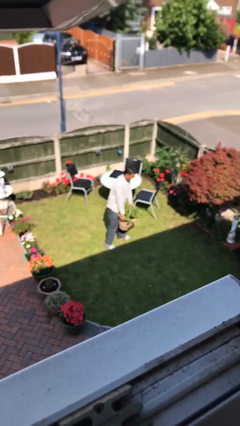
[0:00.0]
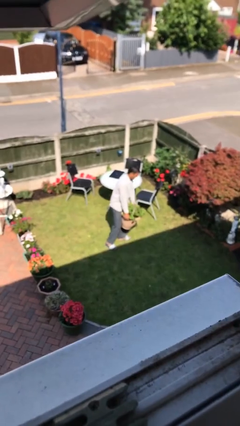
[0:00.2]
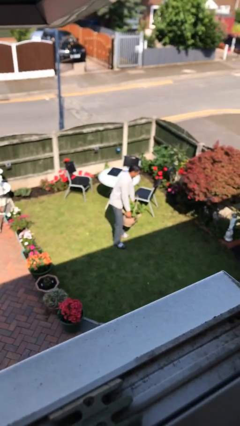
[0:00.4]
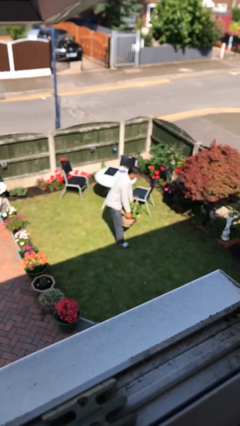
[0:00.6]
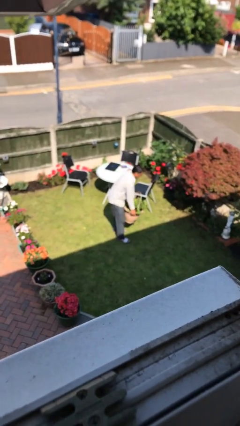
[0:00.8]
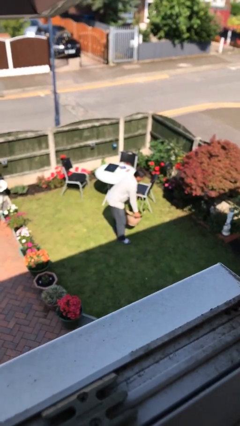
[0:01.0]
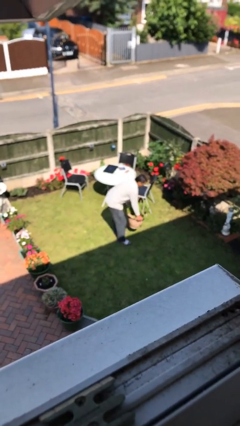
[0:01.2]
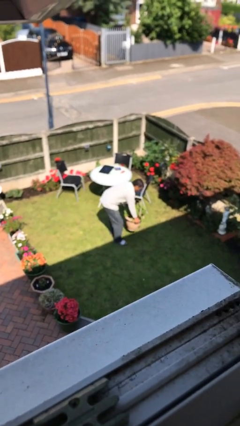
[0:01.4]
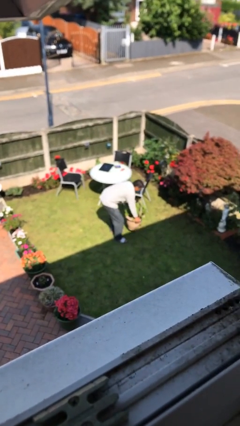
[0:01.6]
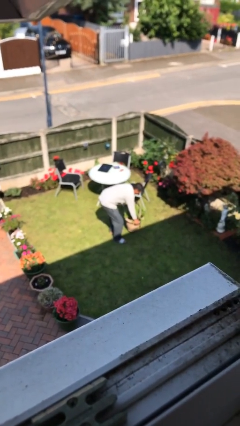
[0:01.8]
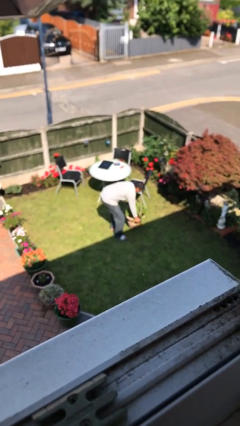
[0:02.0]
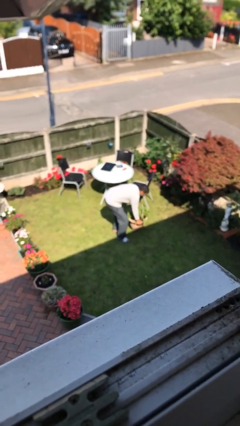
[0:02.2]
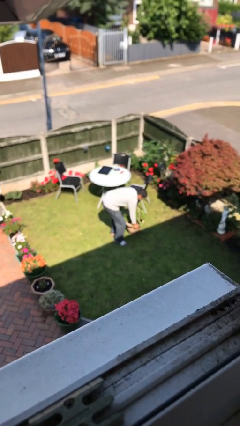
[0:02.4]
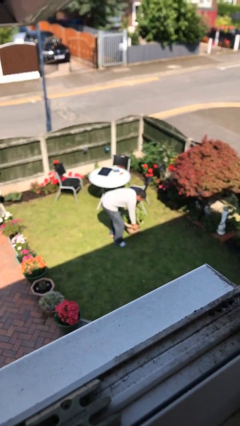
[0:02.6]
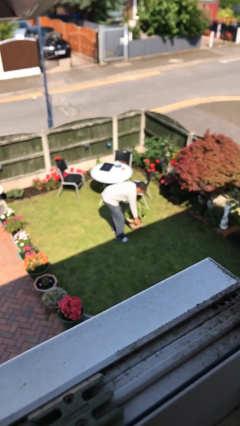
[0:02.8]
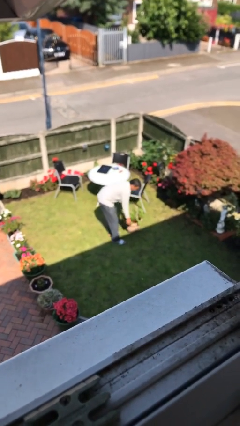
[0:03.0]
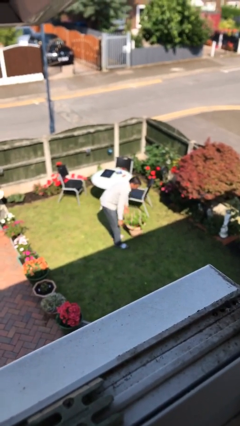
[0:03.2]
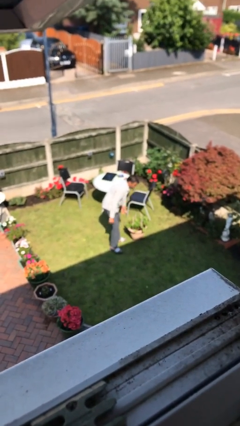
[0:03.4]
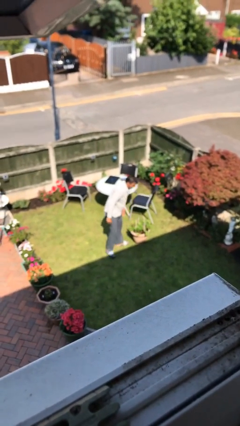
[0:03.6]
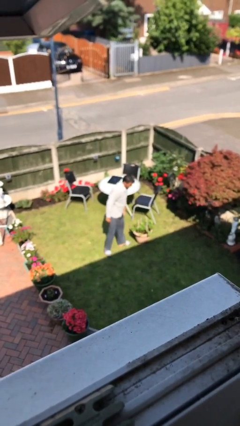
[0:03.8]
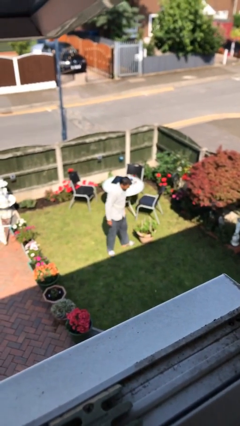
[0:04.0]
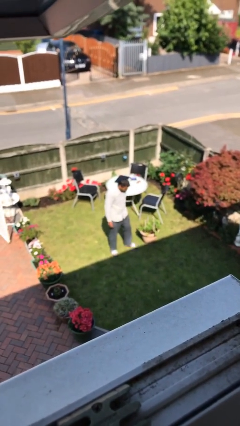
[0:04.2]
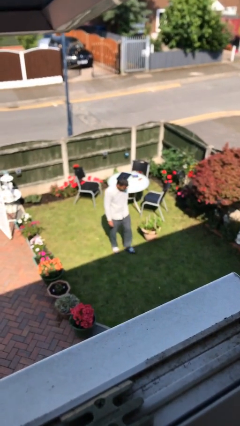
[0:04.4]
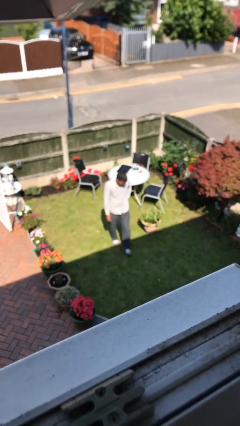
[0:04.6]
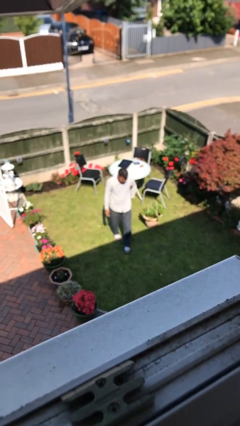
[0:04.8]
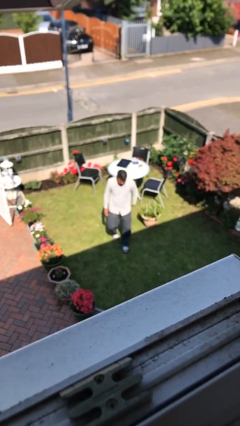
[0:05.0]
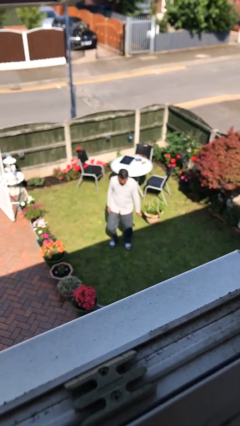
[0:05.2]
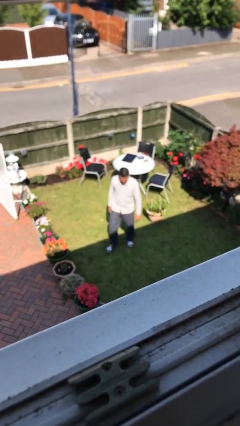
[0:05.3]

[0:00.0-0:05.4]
person puts down object on floor

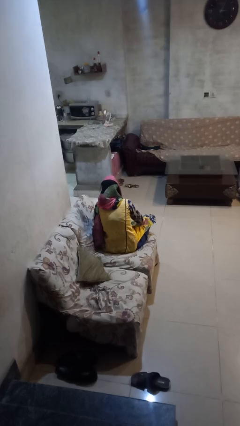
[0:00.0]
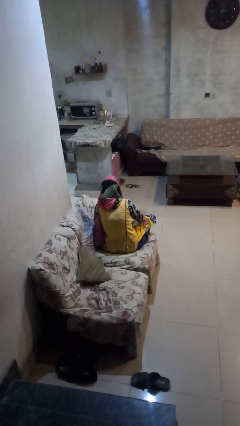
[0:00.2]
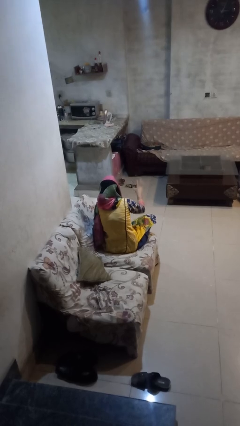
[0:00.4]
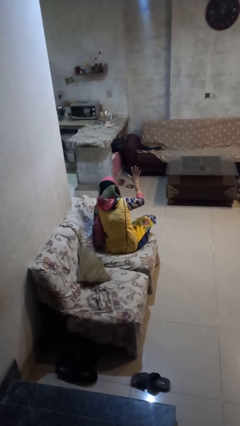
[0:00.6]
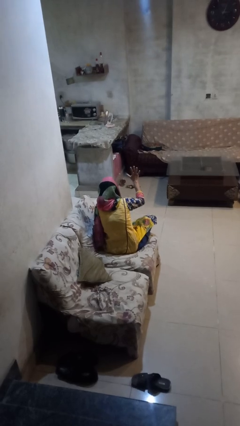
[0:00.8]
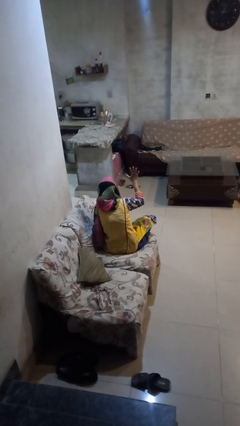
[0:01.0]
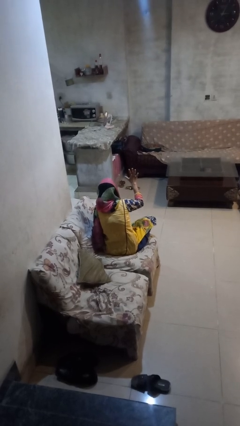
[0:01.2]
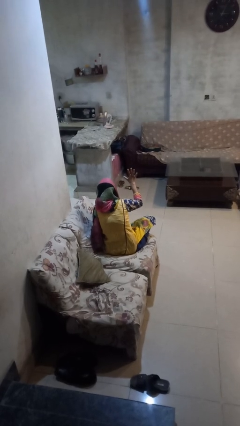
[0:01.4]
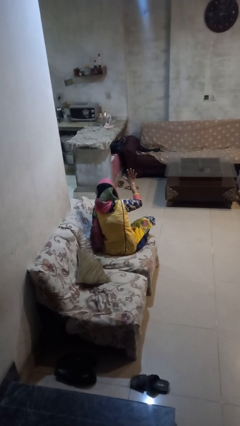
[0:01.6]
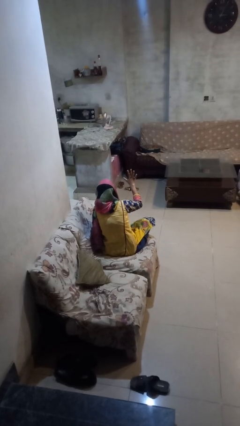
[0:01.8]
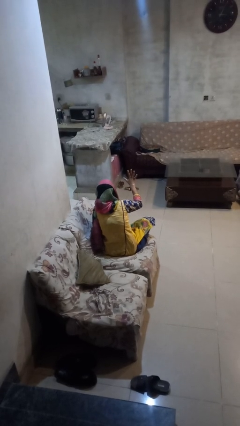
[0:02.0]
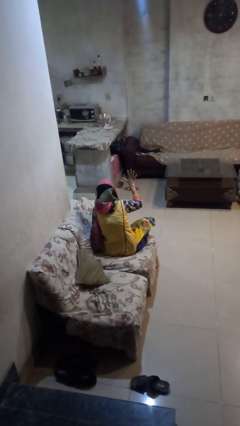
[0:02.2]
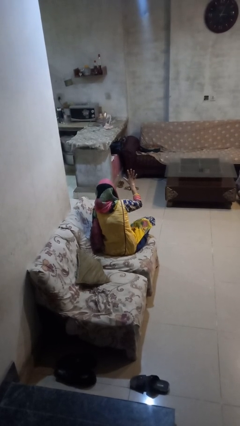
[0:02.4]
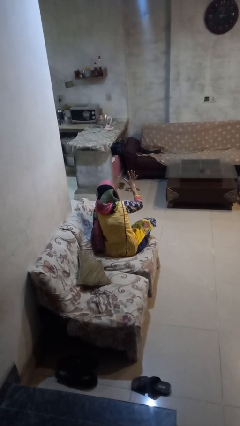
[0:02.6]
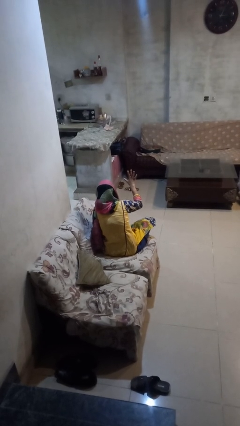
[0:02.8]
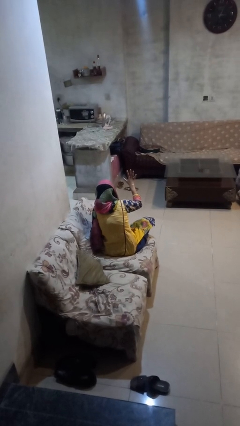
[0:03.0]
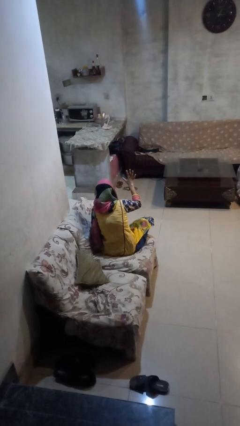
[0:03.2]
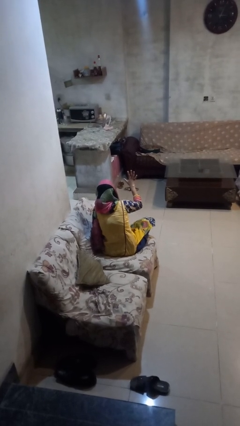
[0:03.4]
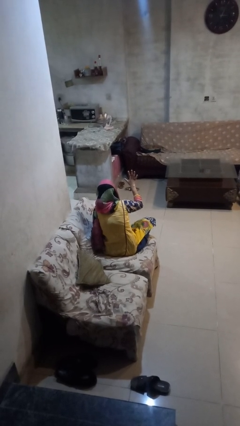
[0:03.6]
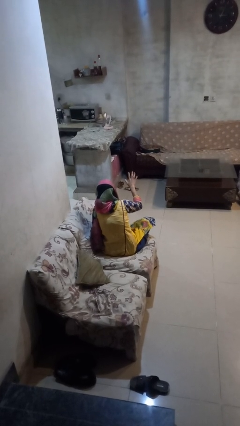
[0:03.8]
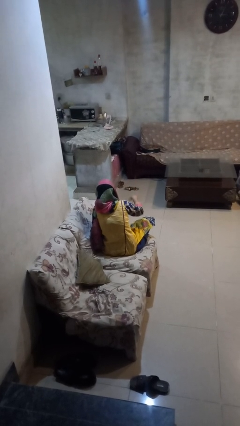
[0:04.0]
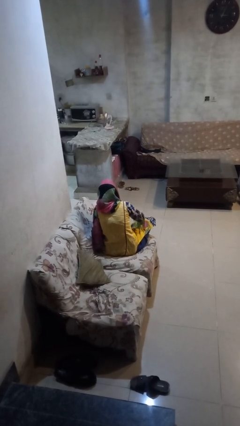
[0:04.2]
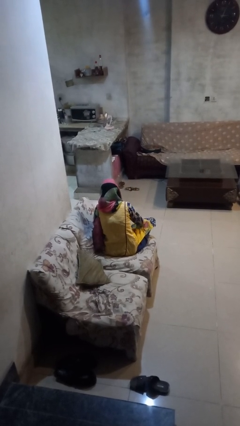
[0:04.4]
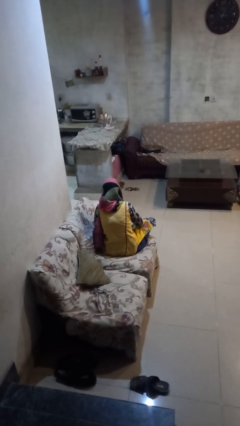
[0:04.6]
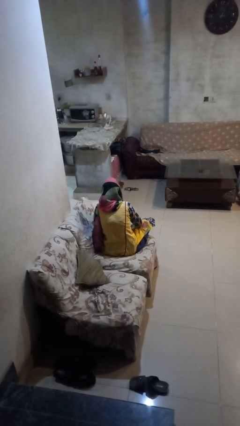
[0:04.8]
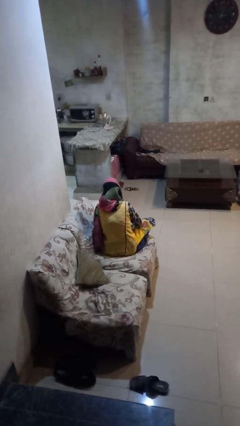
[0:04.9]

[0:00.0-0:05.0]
person gestures number five

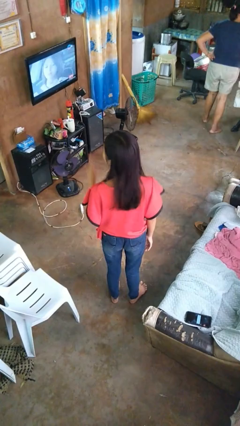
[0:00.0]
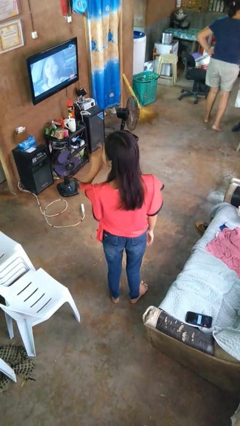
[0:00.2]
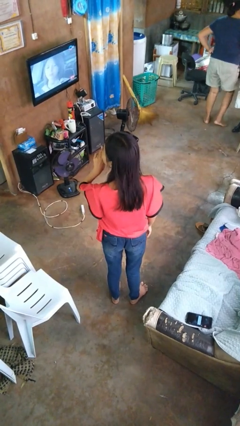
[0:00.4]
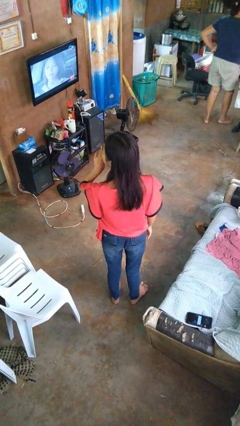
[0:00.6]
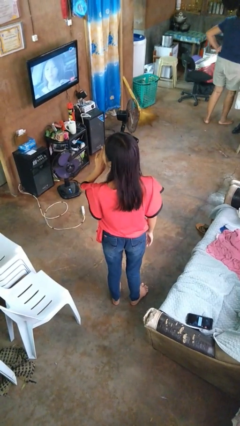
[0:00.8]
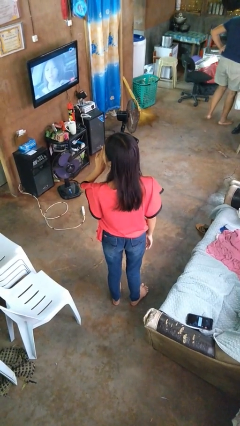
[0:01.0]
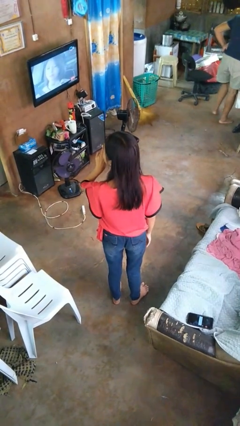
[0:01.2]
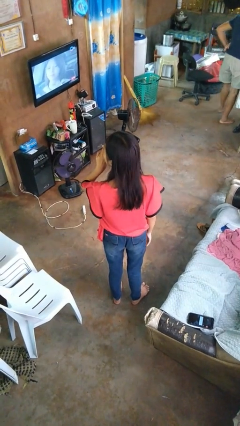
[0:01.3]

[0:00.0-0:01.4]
person gestures be quiet

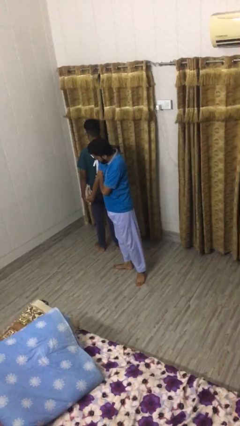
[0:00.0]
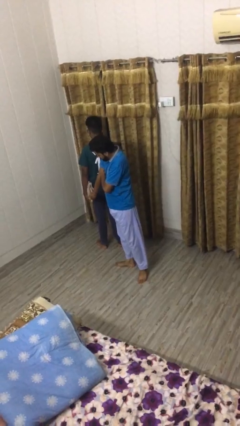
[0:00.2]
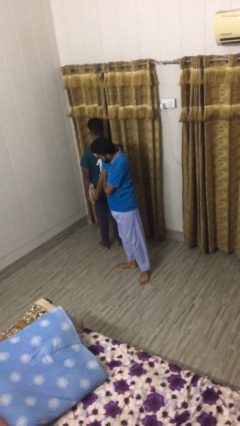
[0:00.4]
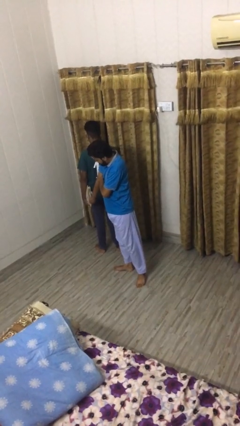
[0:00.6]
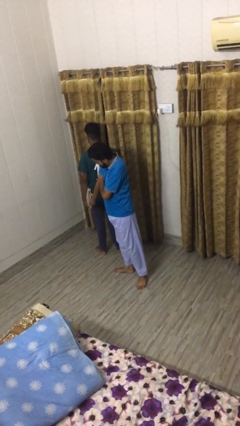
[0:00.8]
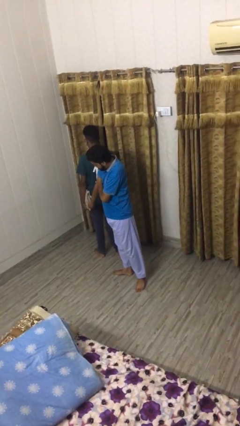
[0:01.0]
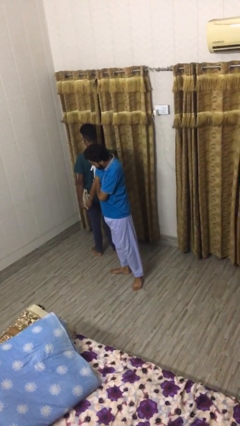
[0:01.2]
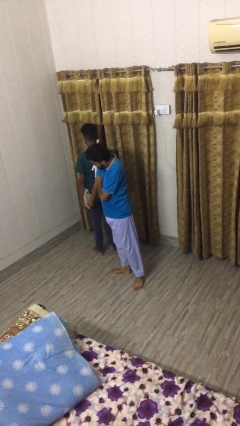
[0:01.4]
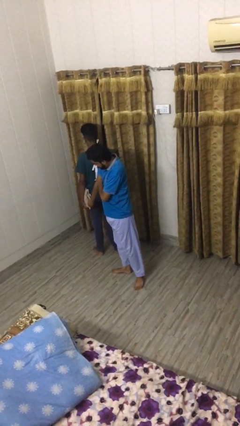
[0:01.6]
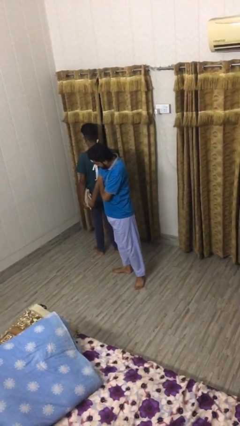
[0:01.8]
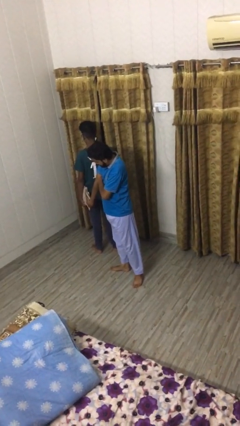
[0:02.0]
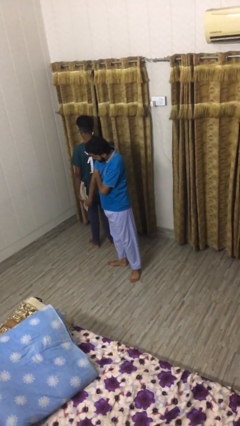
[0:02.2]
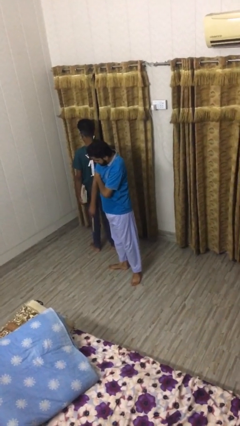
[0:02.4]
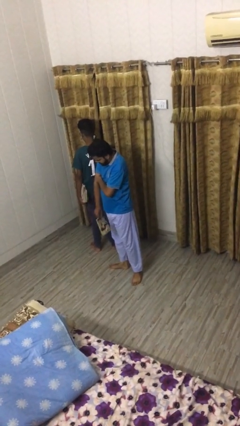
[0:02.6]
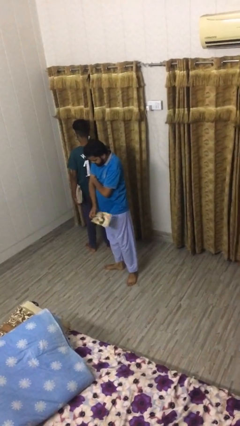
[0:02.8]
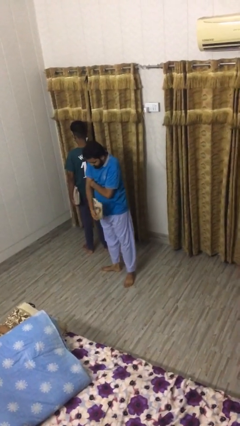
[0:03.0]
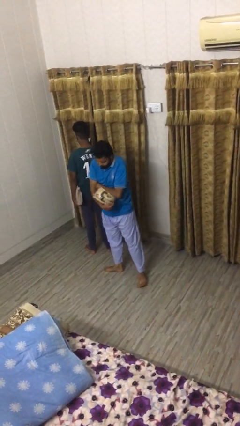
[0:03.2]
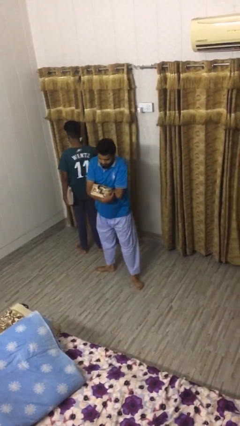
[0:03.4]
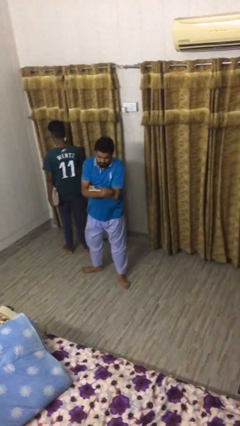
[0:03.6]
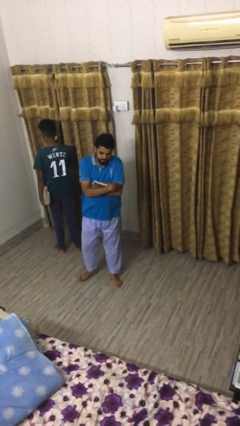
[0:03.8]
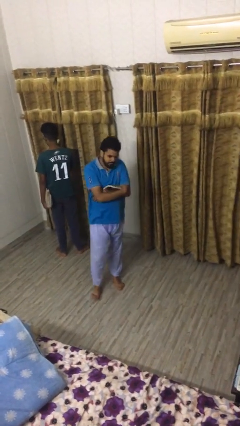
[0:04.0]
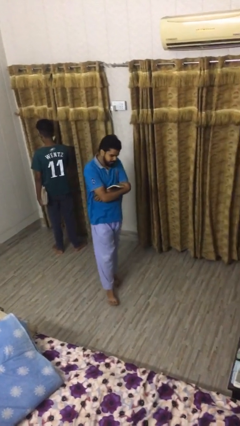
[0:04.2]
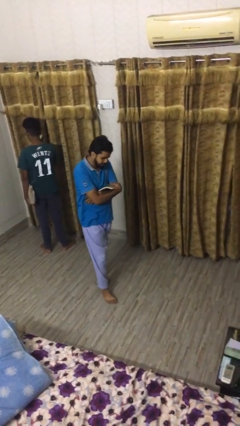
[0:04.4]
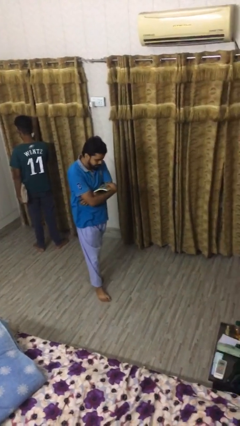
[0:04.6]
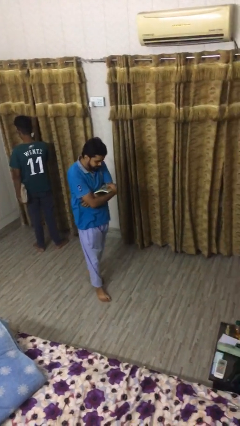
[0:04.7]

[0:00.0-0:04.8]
person steals object from person

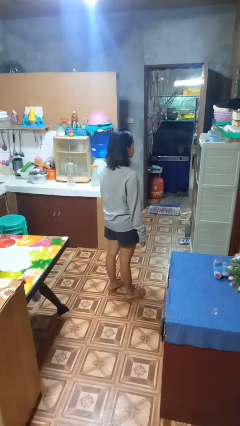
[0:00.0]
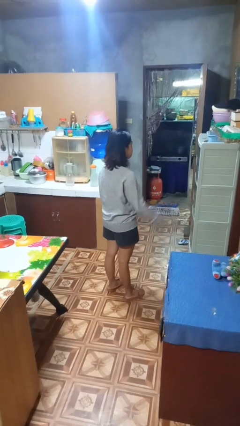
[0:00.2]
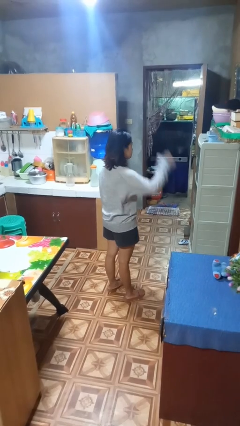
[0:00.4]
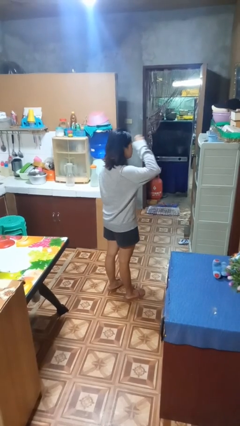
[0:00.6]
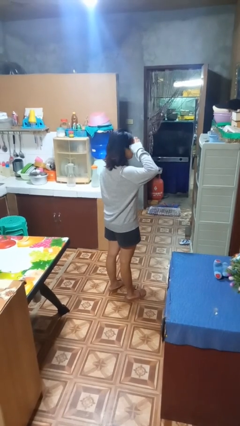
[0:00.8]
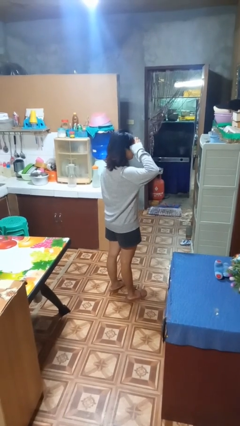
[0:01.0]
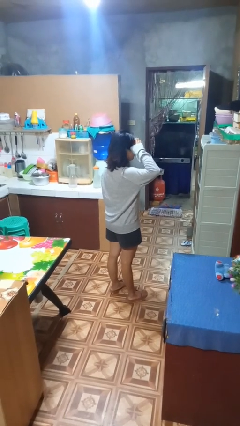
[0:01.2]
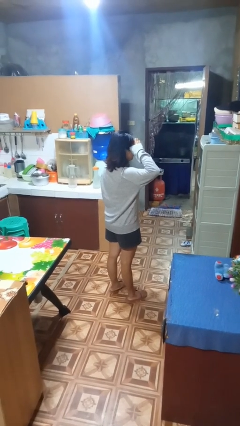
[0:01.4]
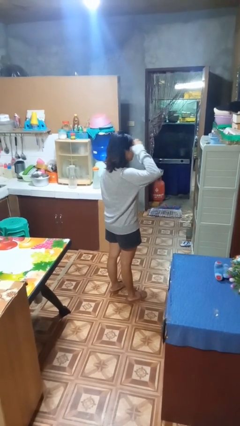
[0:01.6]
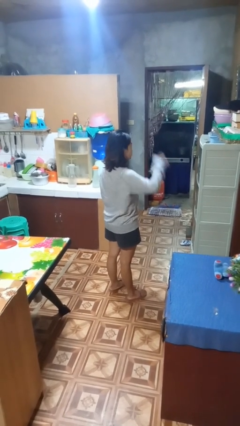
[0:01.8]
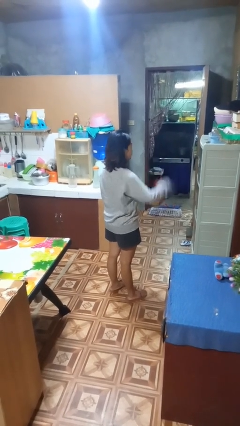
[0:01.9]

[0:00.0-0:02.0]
person salutes
